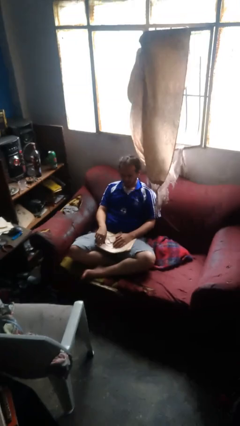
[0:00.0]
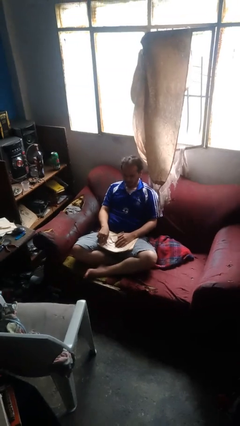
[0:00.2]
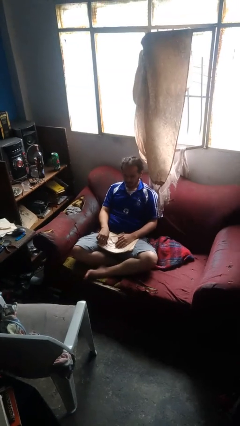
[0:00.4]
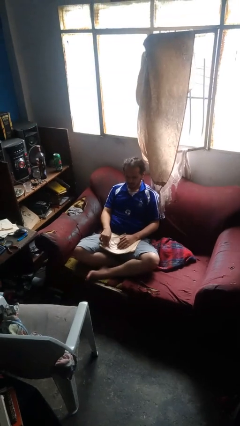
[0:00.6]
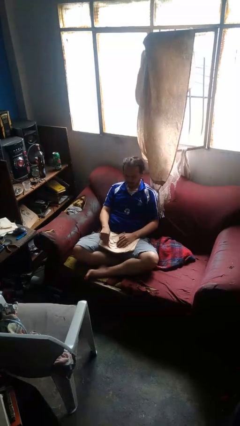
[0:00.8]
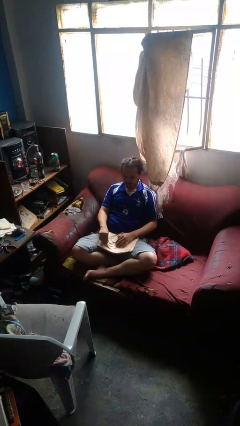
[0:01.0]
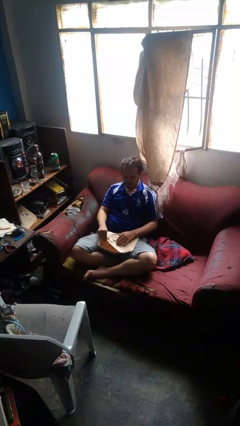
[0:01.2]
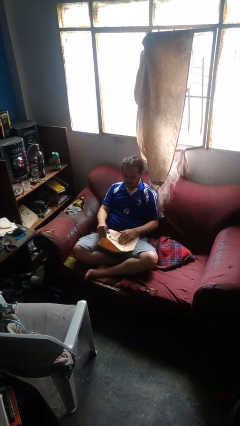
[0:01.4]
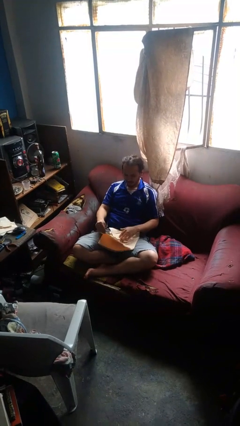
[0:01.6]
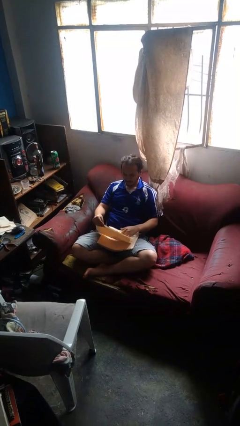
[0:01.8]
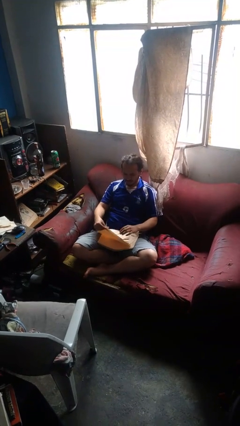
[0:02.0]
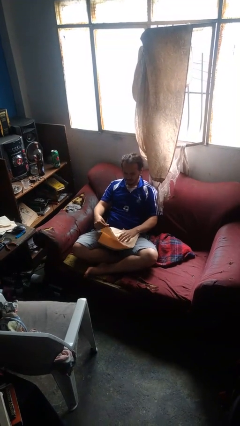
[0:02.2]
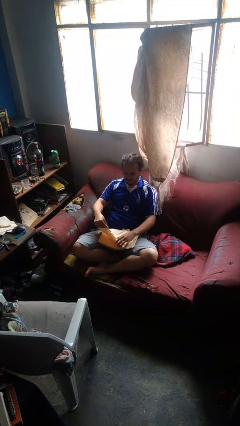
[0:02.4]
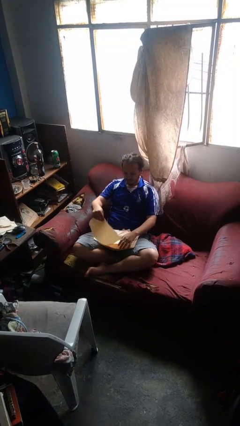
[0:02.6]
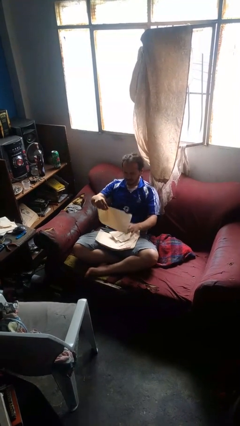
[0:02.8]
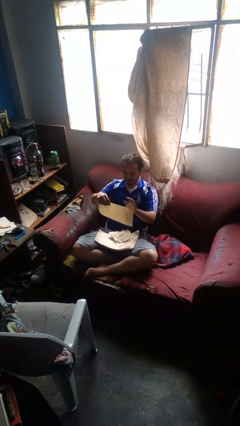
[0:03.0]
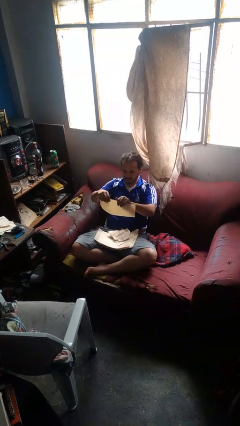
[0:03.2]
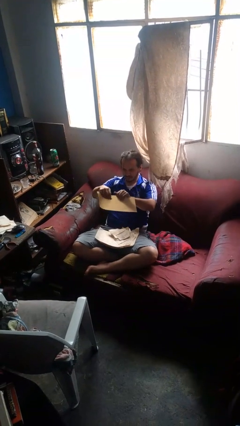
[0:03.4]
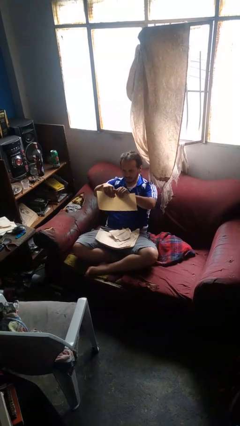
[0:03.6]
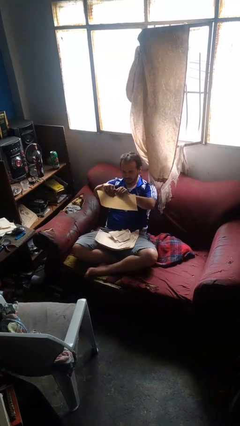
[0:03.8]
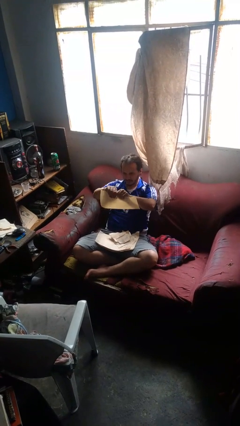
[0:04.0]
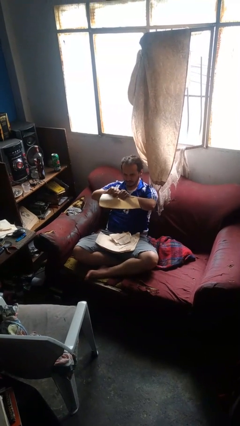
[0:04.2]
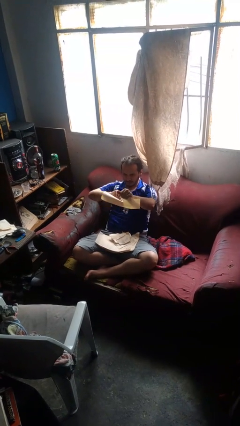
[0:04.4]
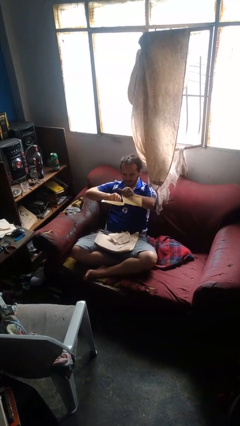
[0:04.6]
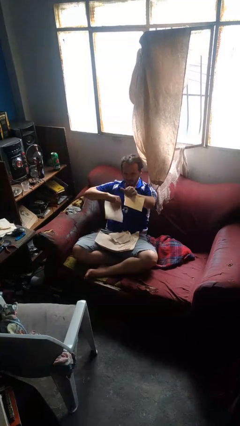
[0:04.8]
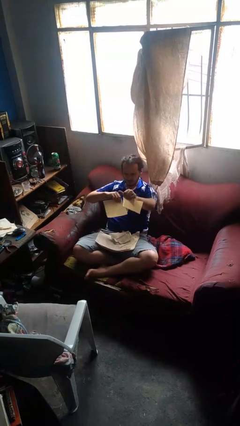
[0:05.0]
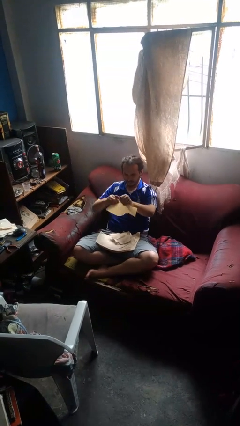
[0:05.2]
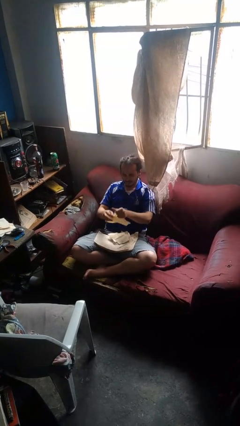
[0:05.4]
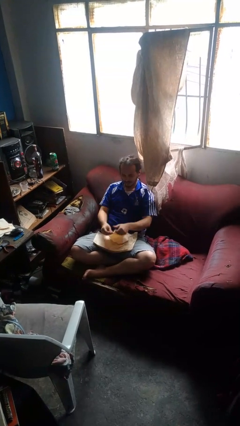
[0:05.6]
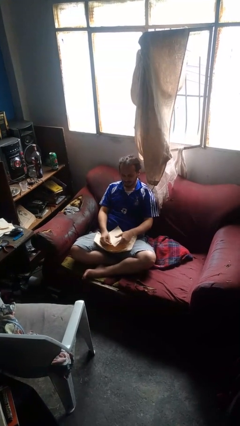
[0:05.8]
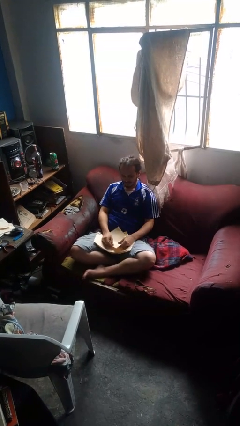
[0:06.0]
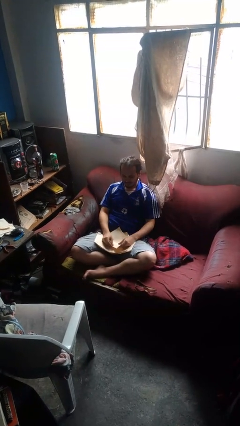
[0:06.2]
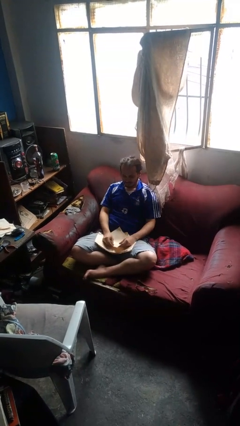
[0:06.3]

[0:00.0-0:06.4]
person tears paper

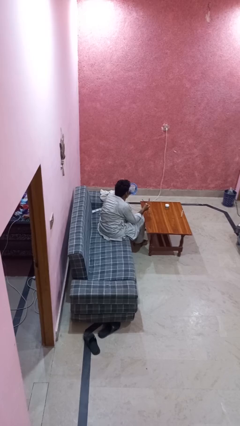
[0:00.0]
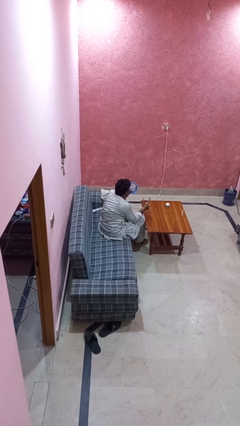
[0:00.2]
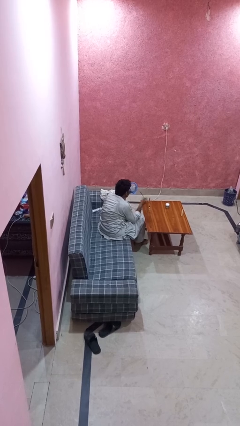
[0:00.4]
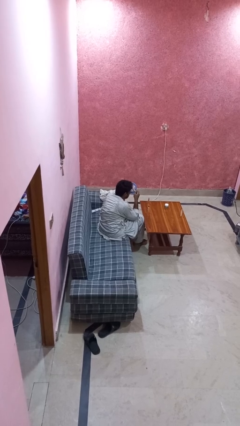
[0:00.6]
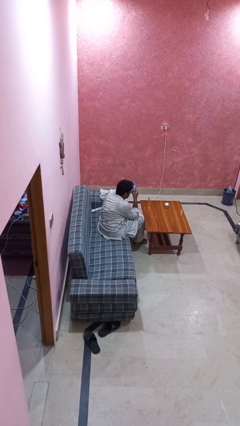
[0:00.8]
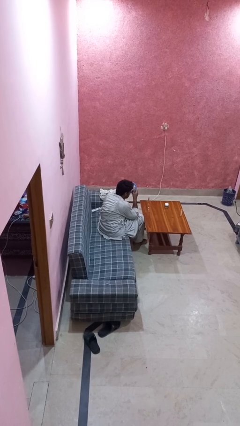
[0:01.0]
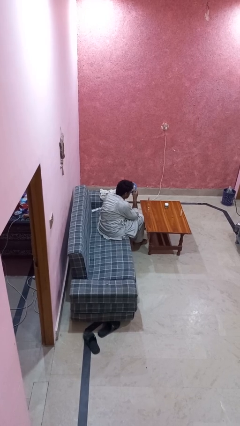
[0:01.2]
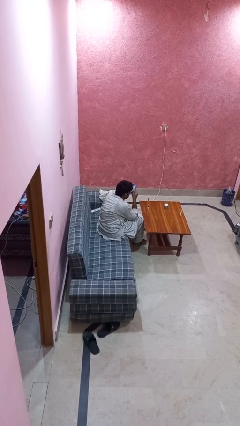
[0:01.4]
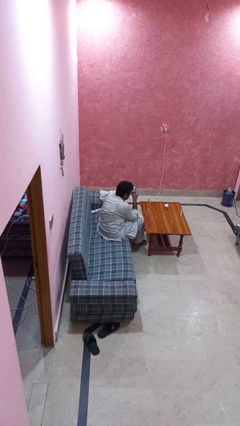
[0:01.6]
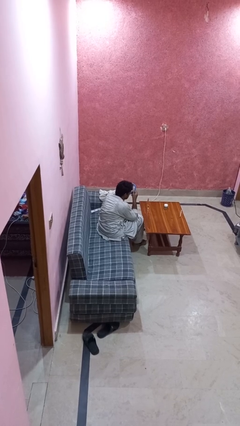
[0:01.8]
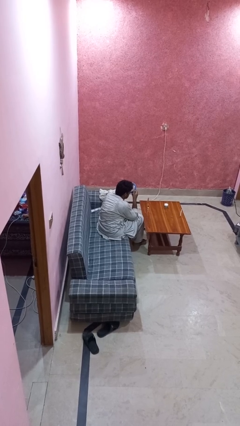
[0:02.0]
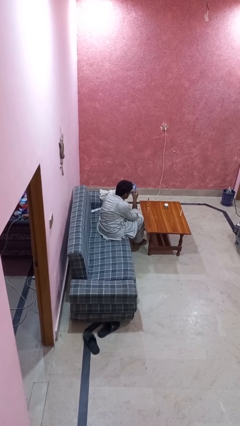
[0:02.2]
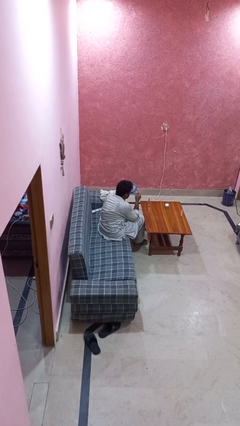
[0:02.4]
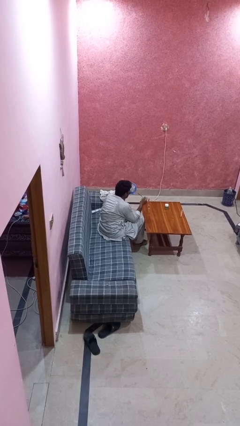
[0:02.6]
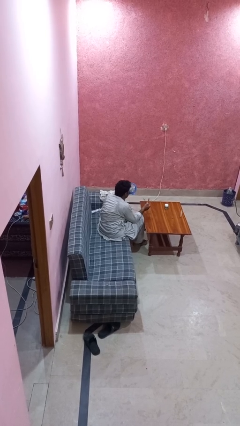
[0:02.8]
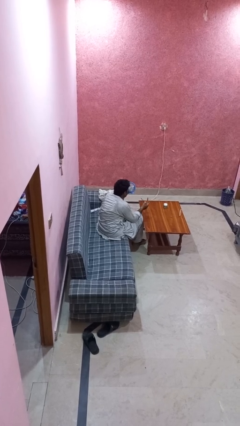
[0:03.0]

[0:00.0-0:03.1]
person applies eye makeup

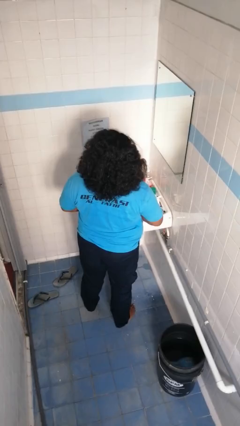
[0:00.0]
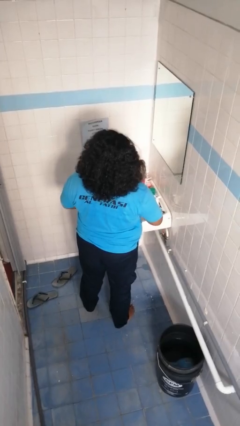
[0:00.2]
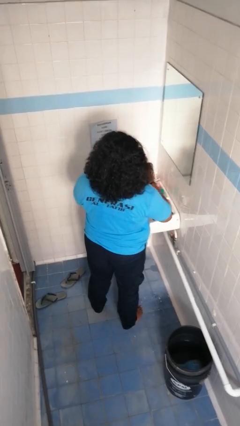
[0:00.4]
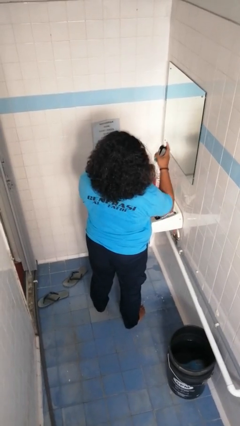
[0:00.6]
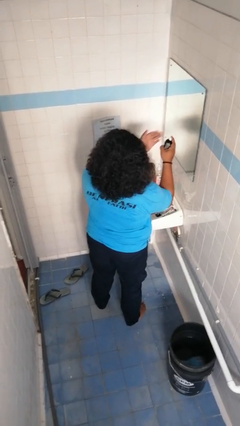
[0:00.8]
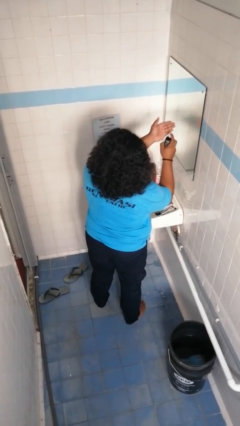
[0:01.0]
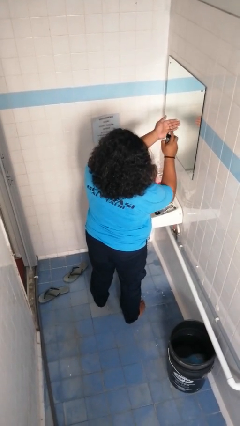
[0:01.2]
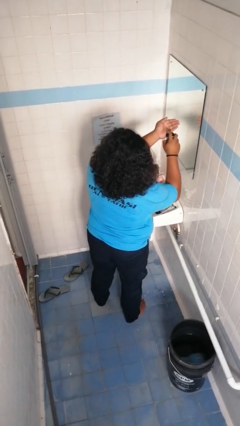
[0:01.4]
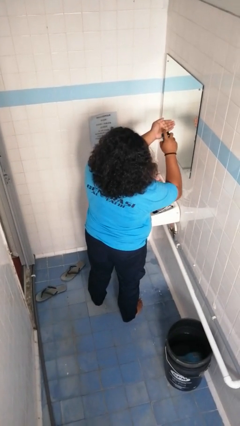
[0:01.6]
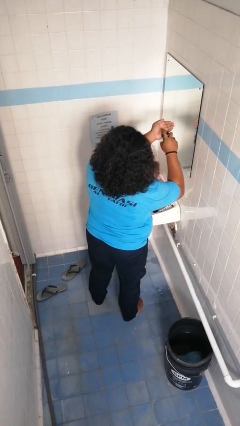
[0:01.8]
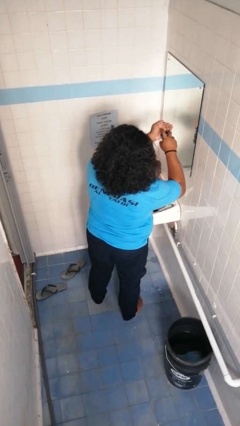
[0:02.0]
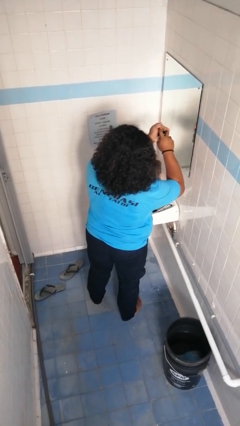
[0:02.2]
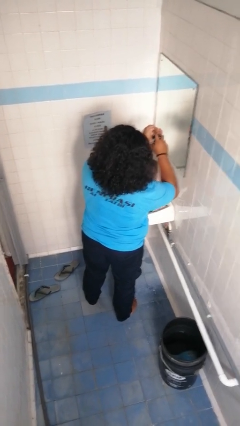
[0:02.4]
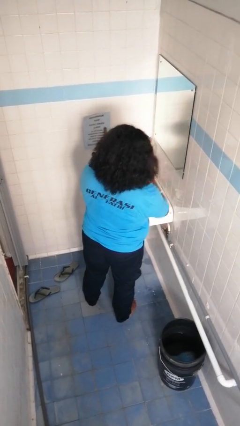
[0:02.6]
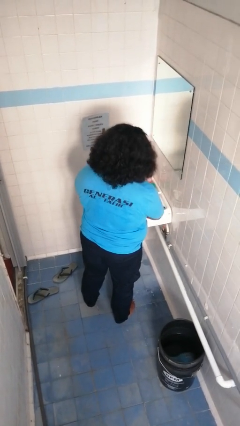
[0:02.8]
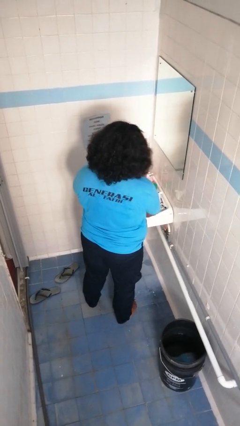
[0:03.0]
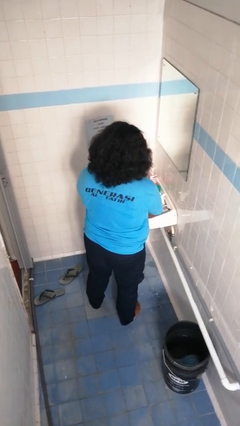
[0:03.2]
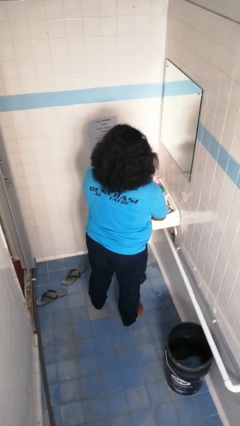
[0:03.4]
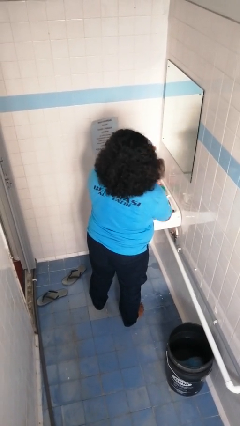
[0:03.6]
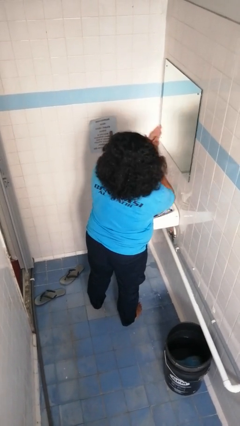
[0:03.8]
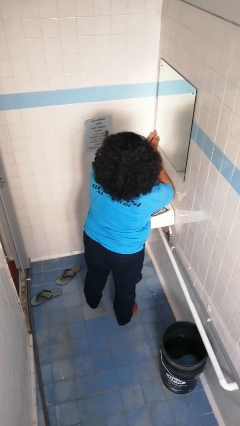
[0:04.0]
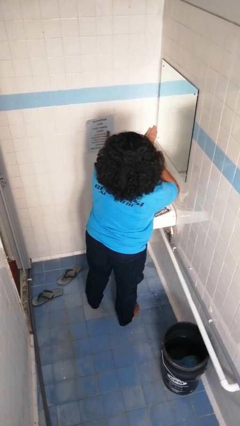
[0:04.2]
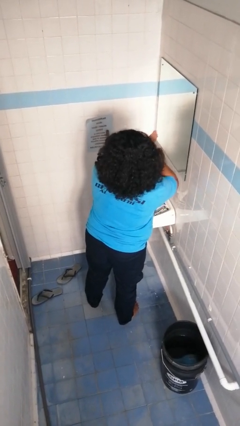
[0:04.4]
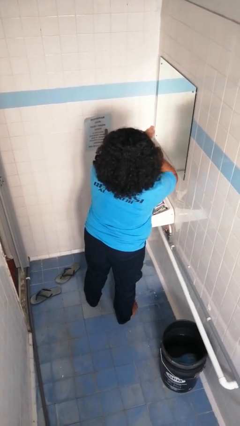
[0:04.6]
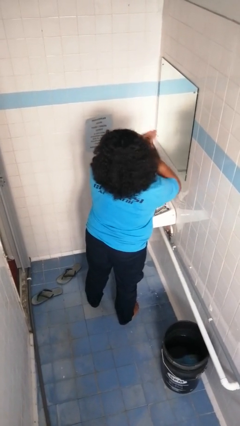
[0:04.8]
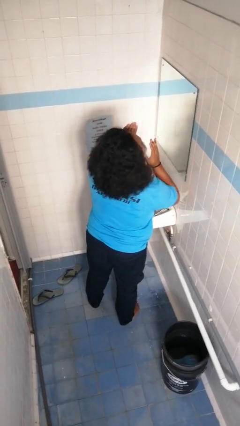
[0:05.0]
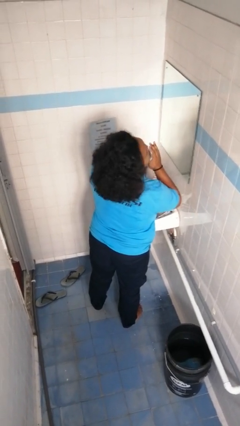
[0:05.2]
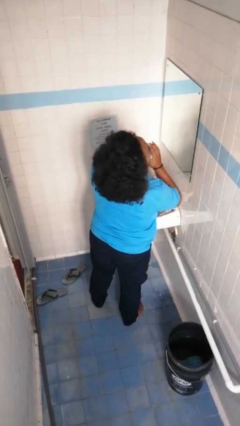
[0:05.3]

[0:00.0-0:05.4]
person applies shaving cream

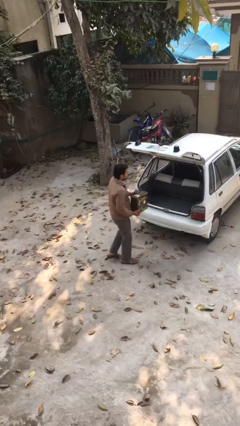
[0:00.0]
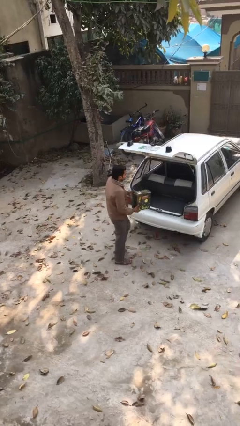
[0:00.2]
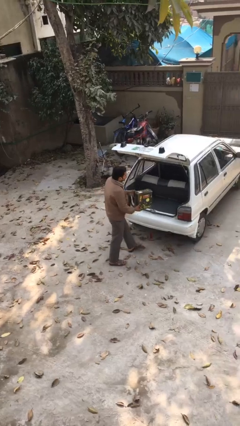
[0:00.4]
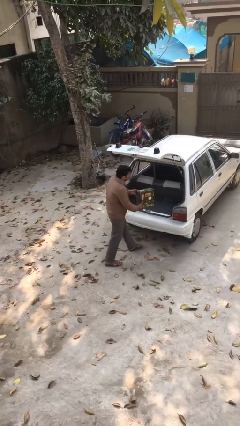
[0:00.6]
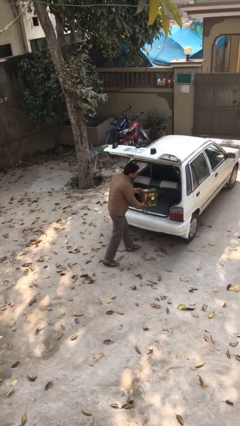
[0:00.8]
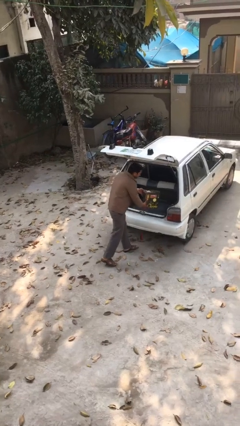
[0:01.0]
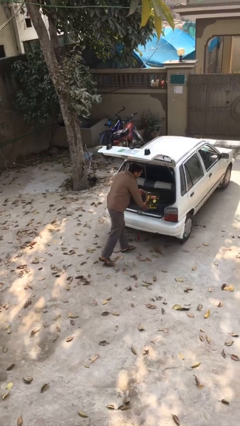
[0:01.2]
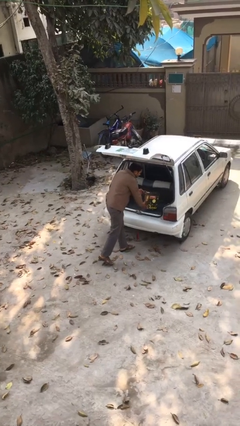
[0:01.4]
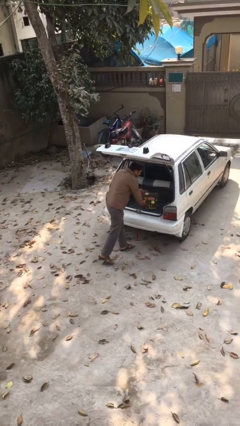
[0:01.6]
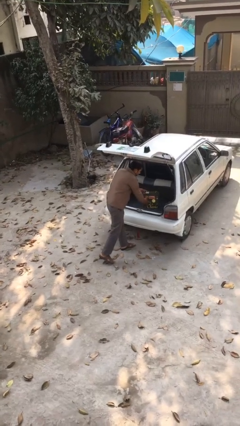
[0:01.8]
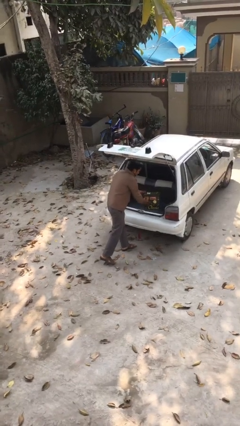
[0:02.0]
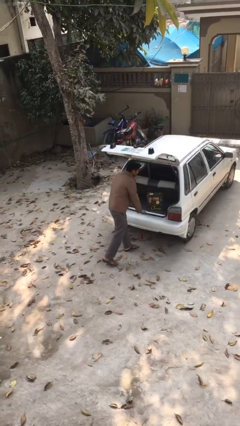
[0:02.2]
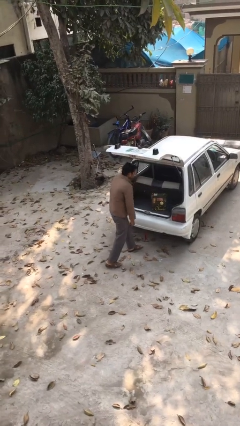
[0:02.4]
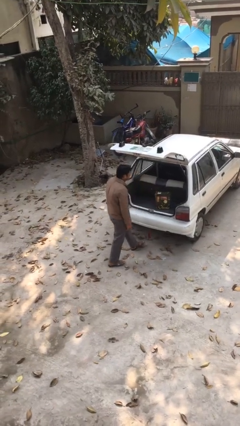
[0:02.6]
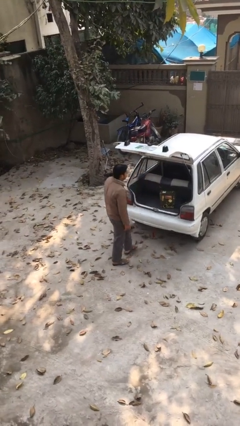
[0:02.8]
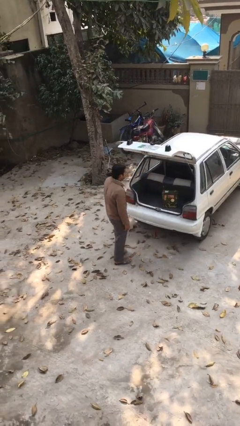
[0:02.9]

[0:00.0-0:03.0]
person loads car

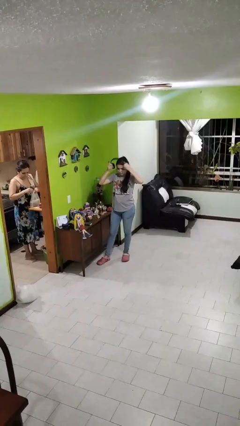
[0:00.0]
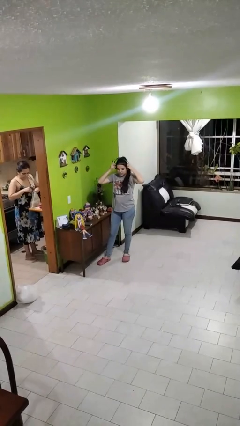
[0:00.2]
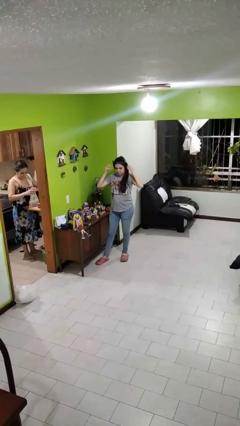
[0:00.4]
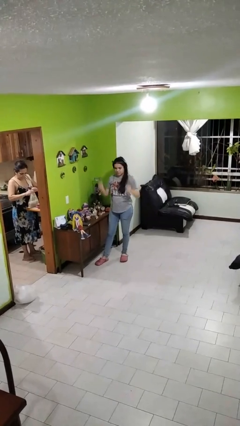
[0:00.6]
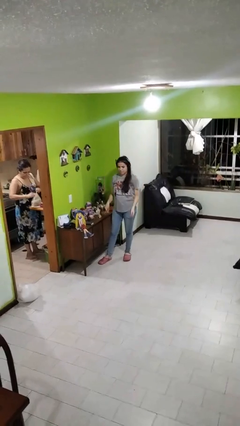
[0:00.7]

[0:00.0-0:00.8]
person puts on headphones
